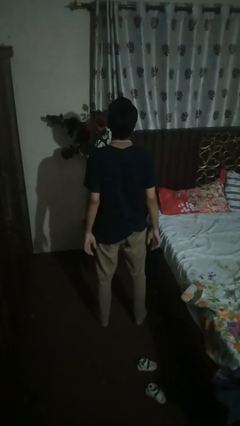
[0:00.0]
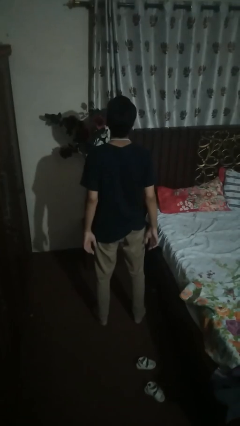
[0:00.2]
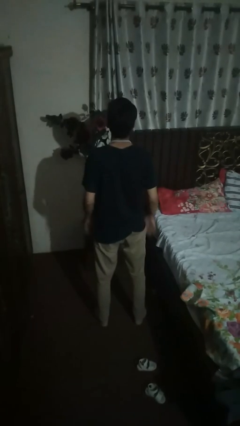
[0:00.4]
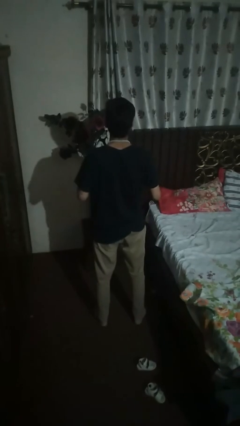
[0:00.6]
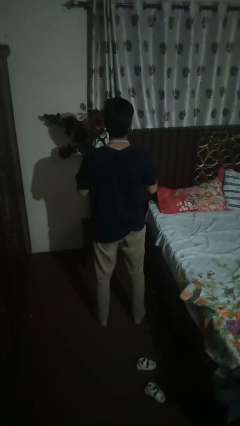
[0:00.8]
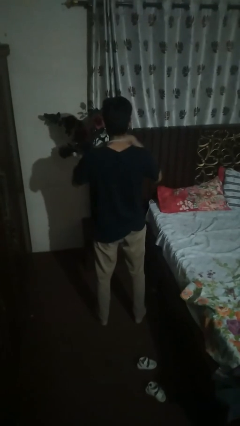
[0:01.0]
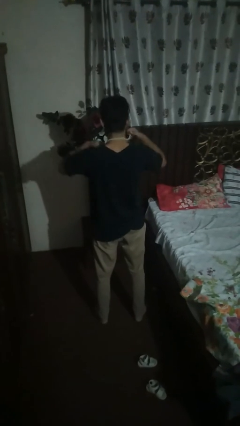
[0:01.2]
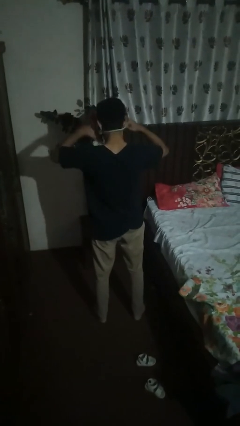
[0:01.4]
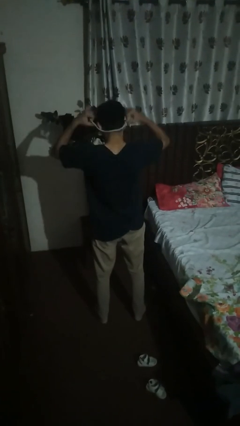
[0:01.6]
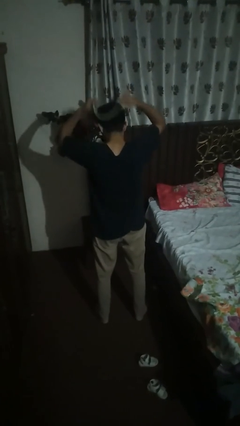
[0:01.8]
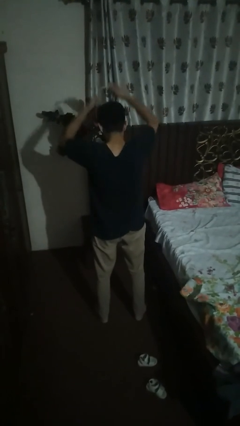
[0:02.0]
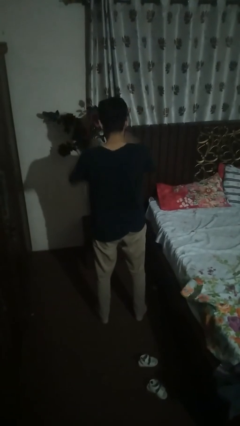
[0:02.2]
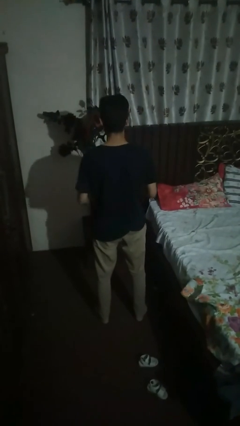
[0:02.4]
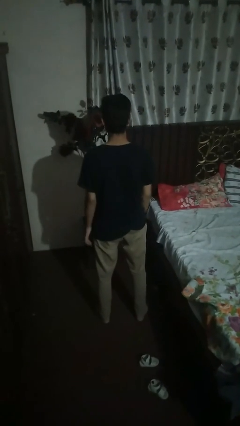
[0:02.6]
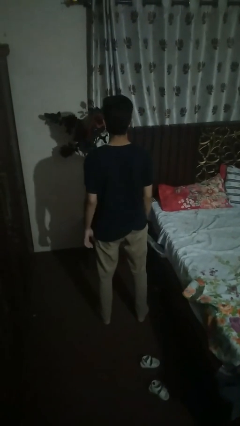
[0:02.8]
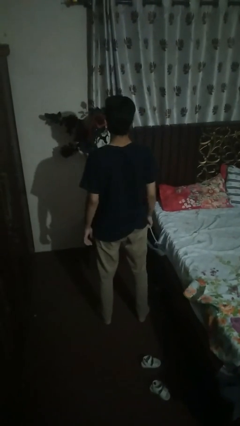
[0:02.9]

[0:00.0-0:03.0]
person takes off necklace

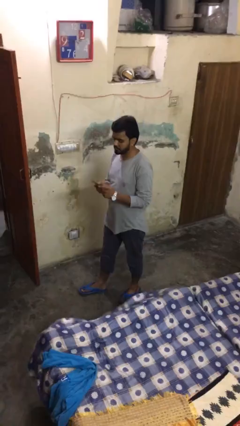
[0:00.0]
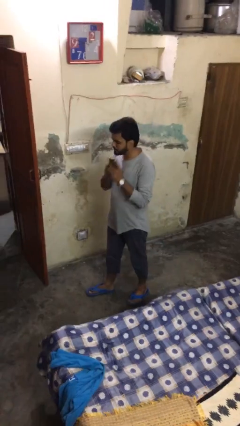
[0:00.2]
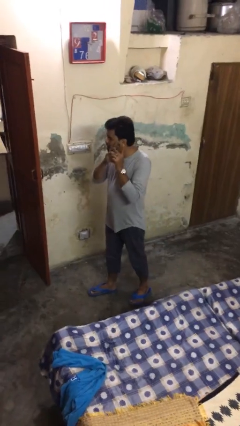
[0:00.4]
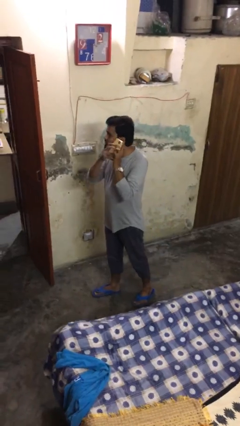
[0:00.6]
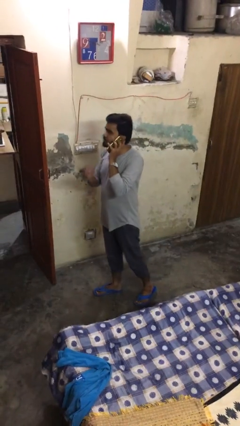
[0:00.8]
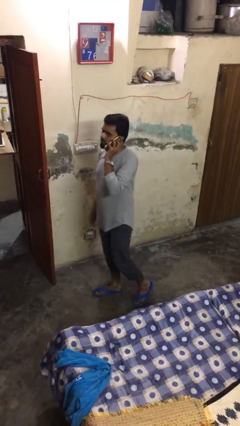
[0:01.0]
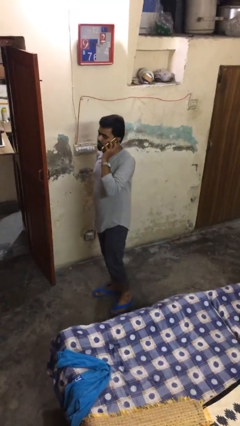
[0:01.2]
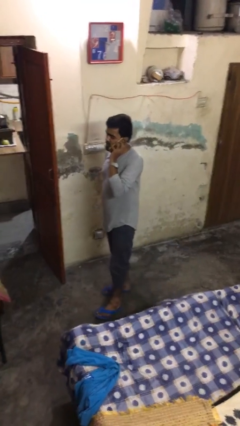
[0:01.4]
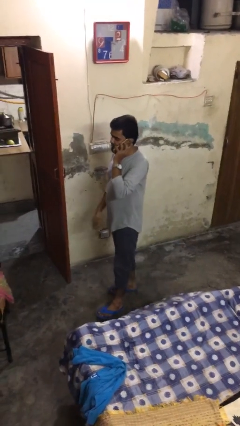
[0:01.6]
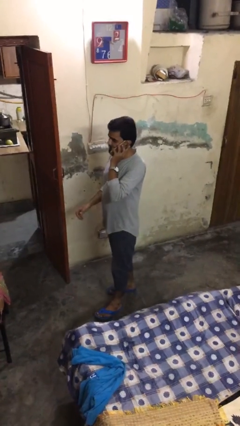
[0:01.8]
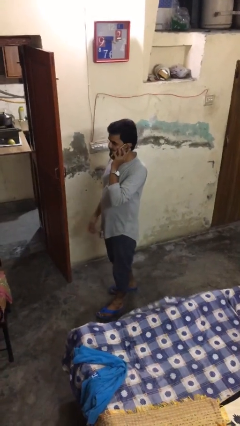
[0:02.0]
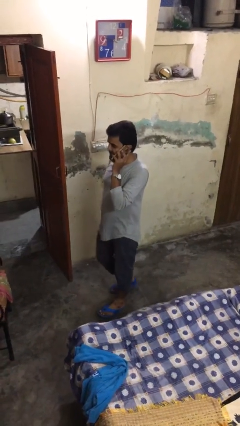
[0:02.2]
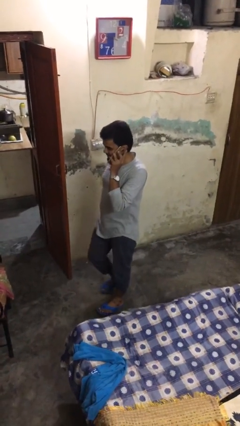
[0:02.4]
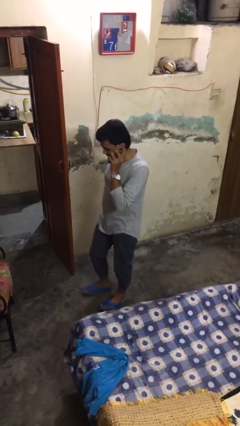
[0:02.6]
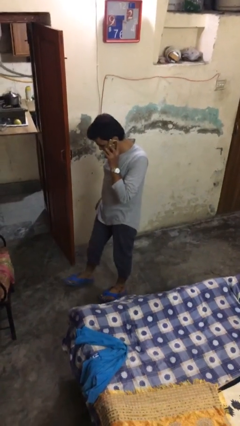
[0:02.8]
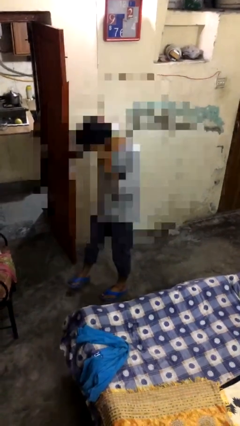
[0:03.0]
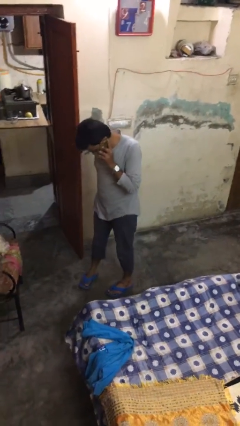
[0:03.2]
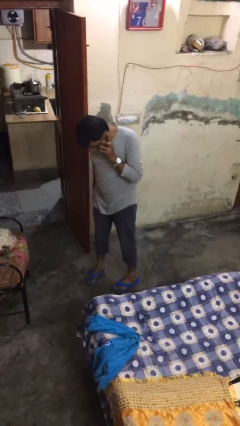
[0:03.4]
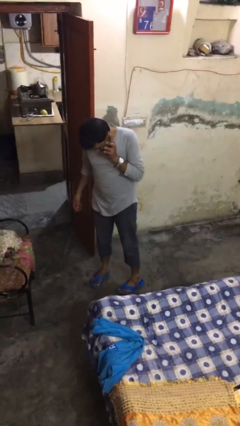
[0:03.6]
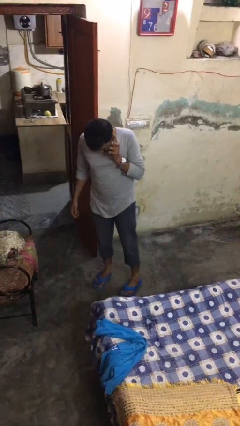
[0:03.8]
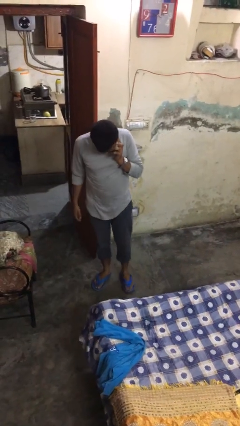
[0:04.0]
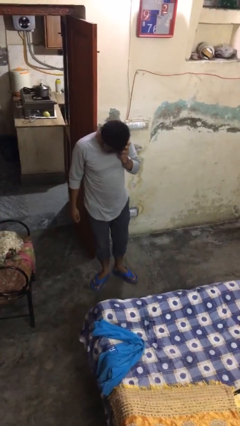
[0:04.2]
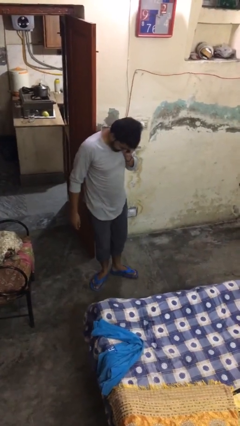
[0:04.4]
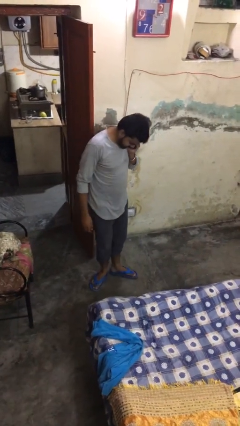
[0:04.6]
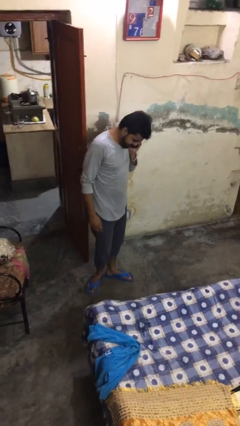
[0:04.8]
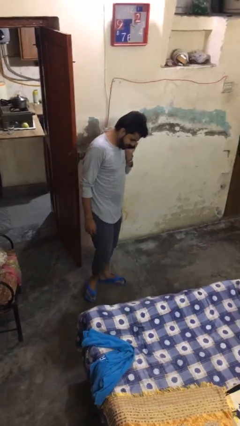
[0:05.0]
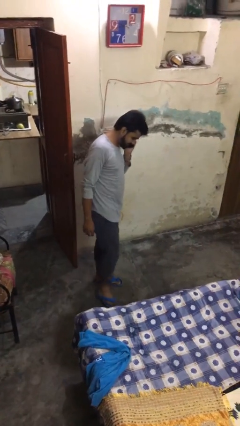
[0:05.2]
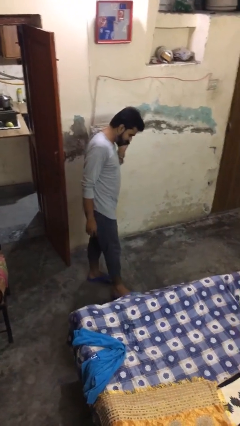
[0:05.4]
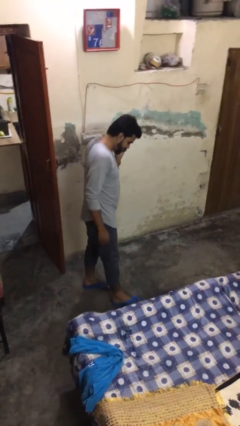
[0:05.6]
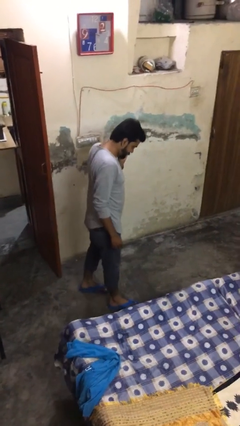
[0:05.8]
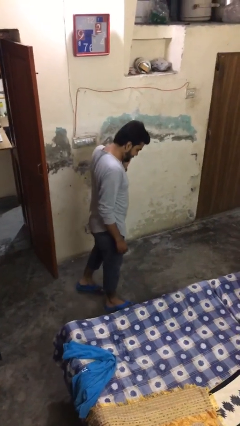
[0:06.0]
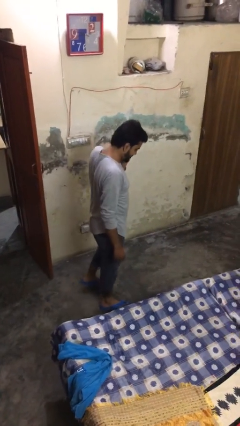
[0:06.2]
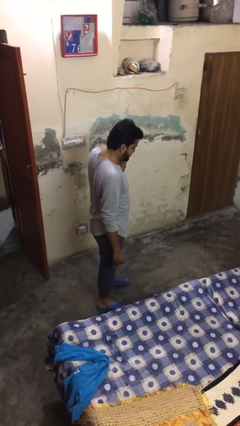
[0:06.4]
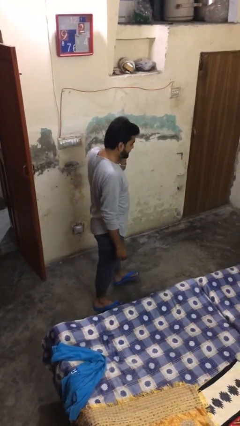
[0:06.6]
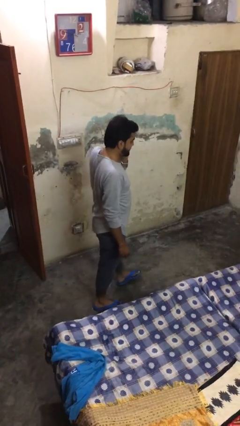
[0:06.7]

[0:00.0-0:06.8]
person talks on phone

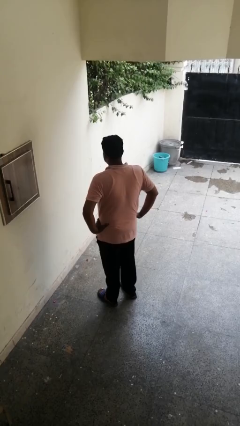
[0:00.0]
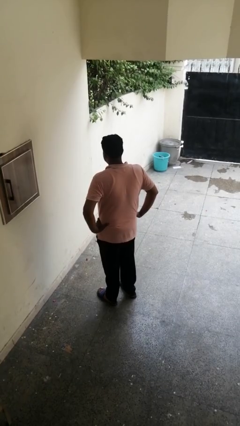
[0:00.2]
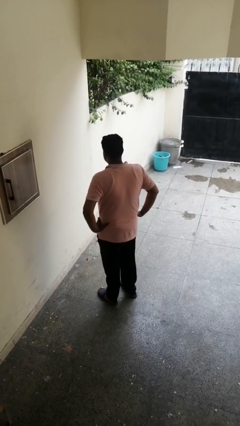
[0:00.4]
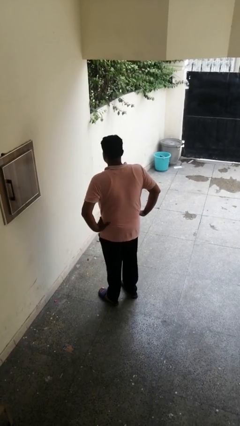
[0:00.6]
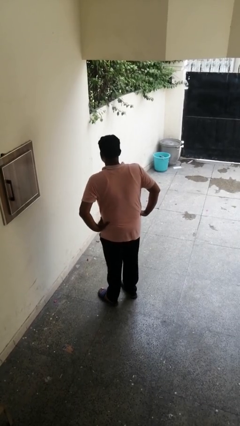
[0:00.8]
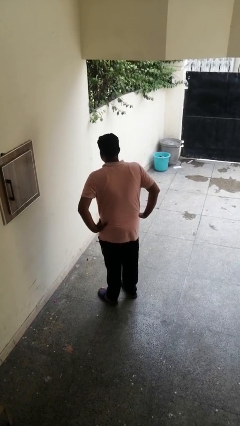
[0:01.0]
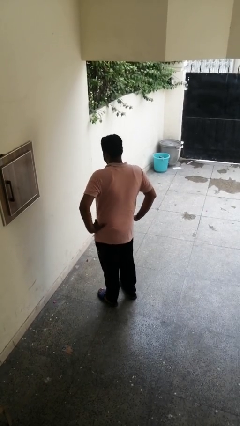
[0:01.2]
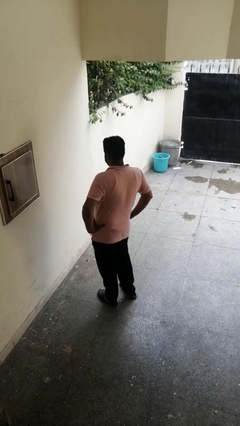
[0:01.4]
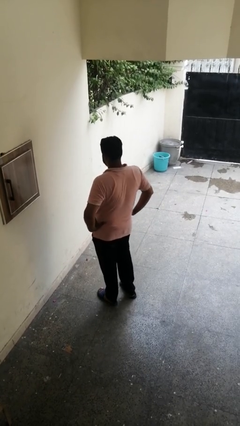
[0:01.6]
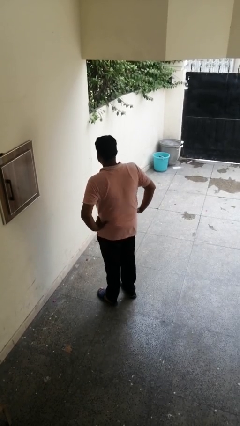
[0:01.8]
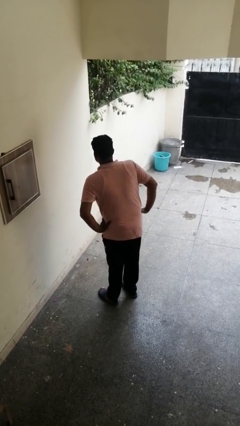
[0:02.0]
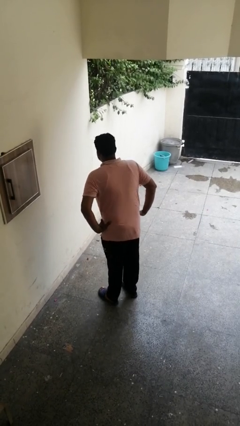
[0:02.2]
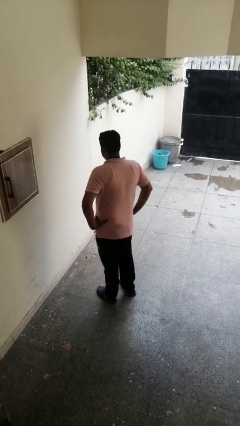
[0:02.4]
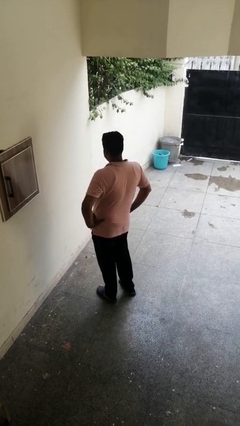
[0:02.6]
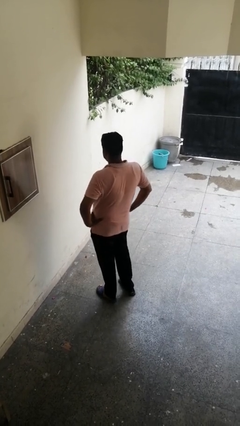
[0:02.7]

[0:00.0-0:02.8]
person wiggles hips

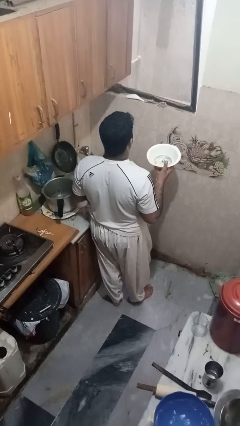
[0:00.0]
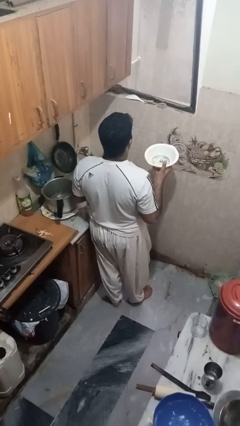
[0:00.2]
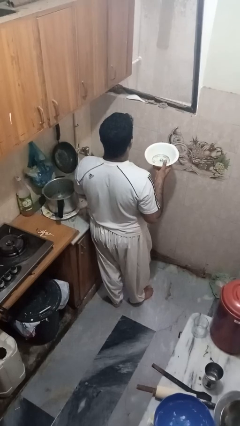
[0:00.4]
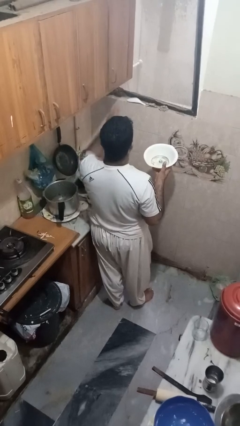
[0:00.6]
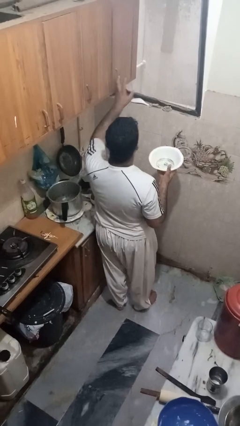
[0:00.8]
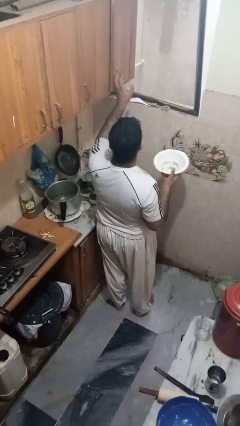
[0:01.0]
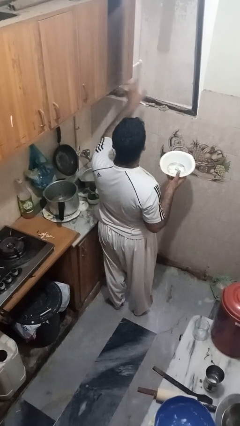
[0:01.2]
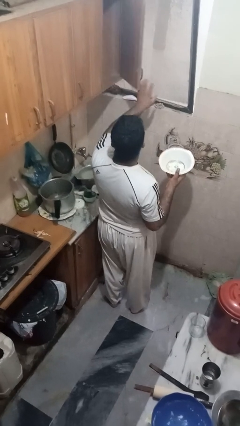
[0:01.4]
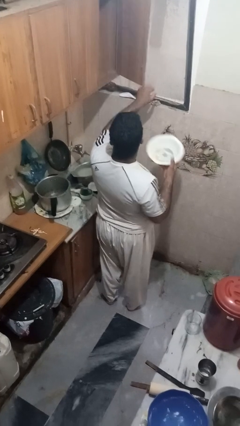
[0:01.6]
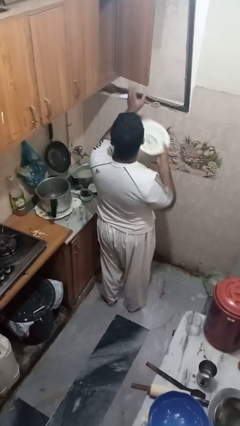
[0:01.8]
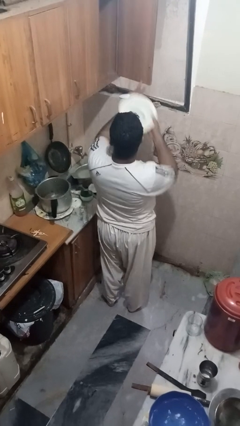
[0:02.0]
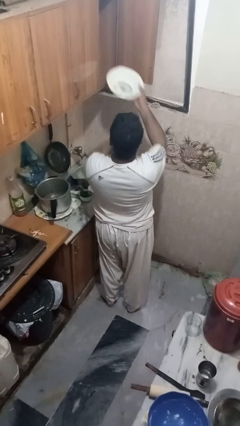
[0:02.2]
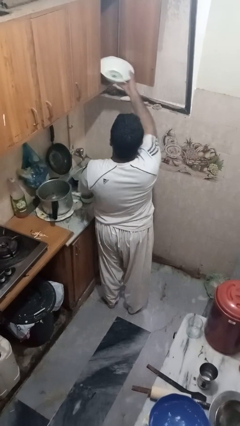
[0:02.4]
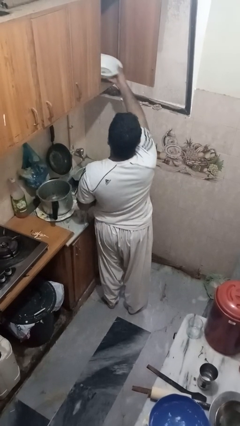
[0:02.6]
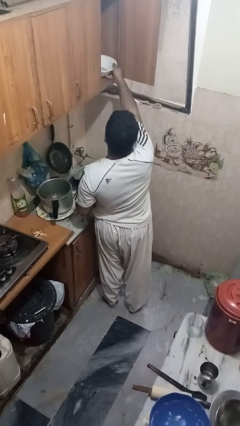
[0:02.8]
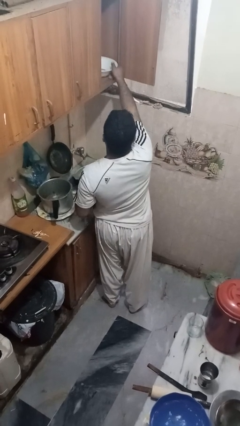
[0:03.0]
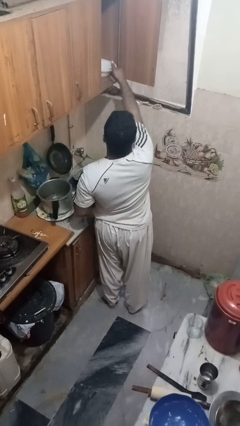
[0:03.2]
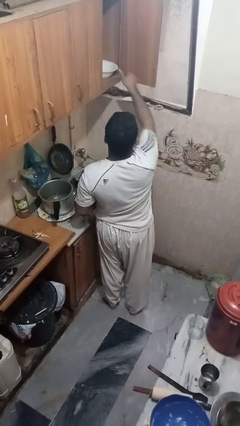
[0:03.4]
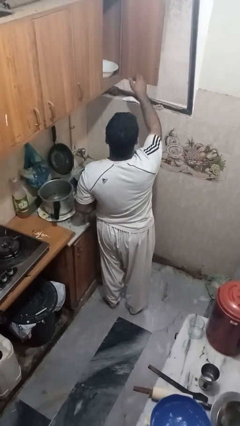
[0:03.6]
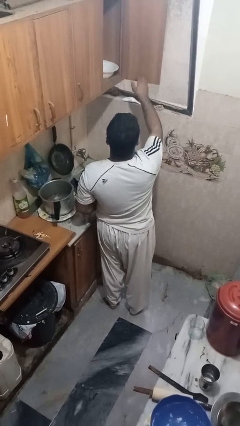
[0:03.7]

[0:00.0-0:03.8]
person puts object in cabinet

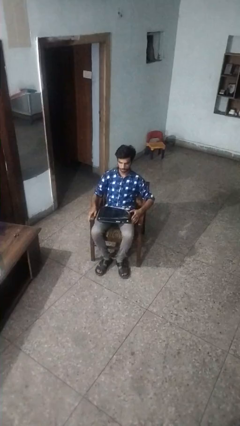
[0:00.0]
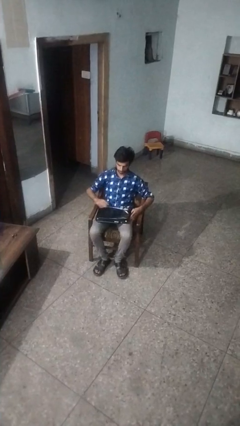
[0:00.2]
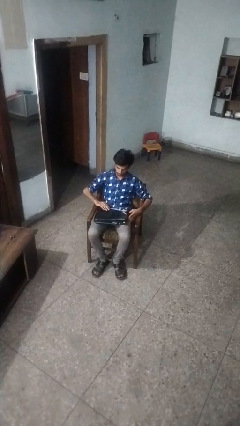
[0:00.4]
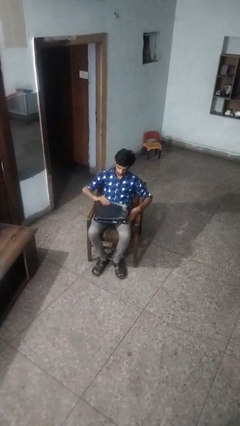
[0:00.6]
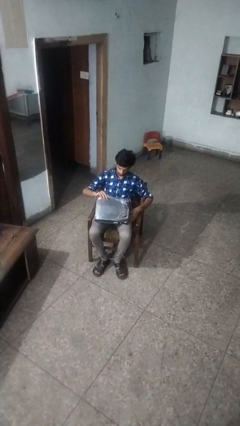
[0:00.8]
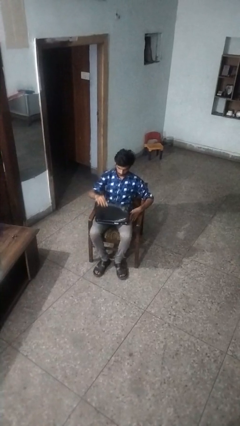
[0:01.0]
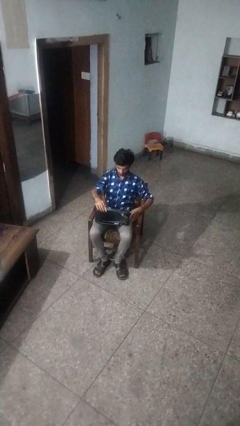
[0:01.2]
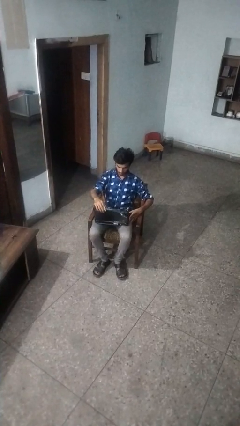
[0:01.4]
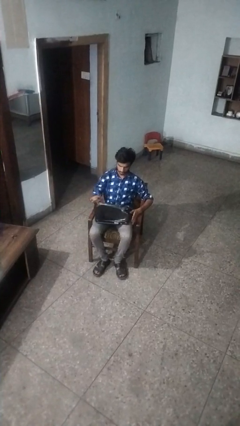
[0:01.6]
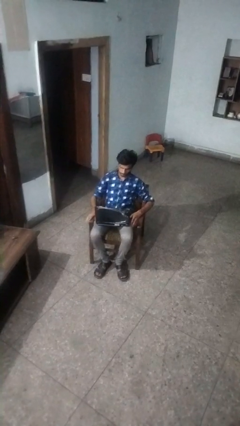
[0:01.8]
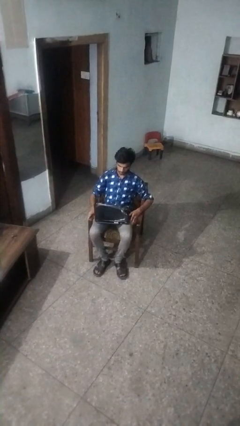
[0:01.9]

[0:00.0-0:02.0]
person opens laptop
